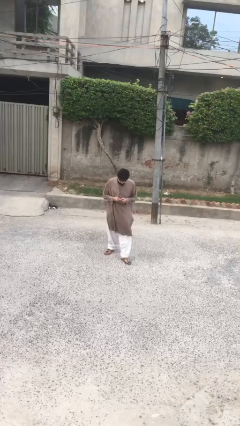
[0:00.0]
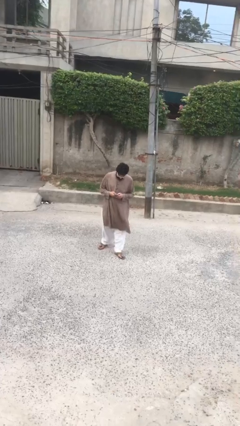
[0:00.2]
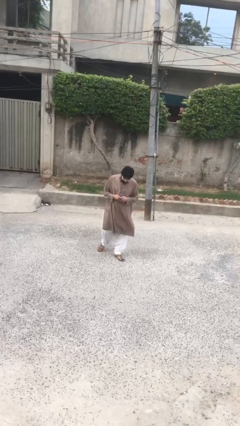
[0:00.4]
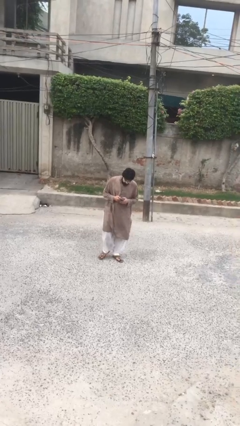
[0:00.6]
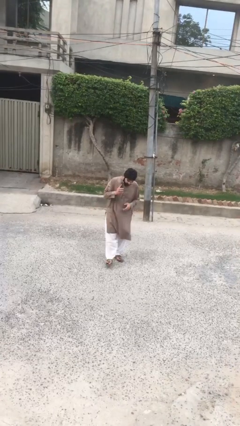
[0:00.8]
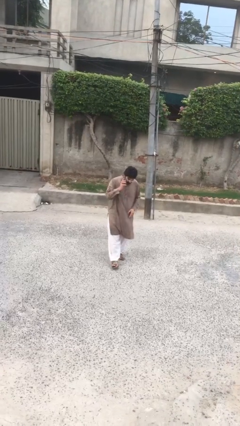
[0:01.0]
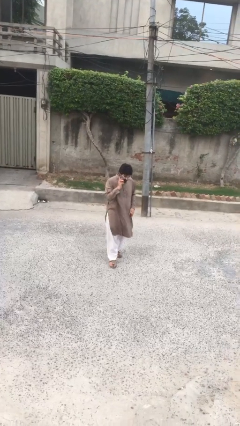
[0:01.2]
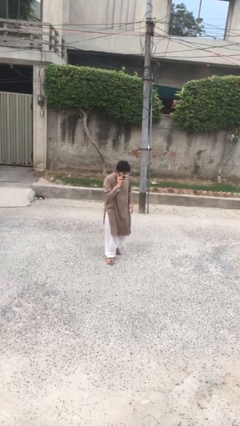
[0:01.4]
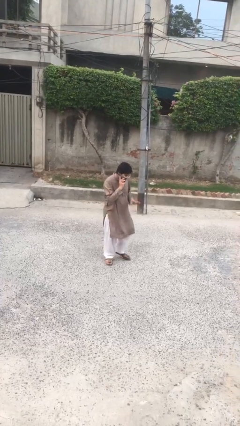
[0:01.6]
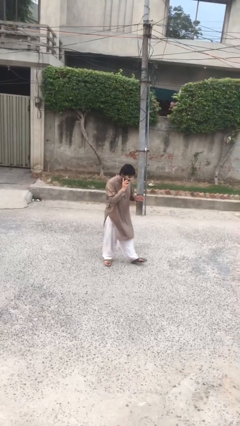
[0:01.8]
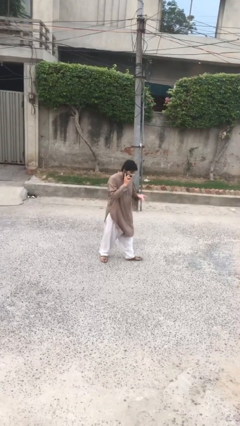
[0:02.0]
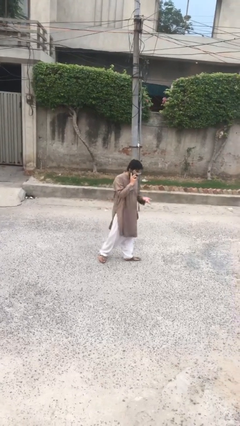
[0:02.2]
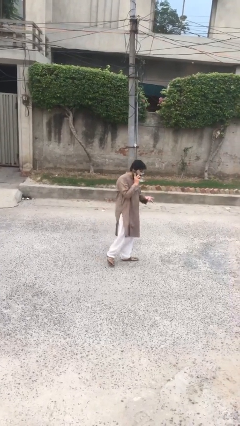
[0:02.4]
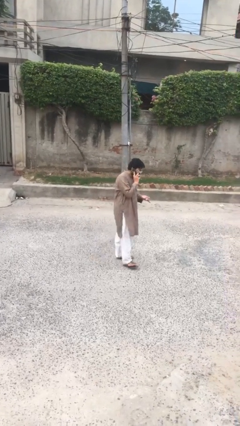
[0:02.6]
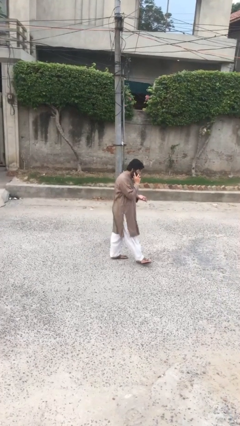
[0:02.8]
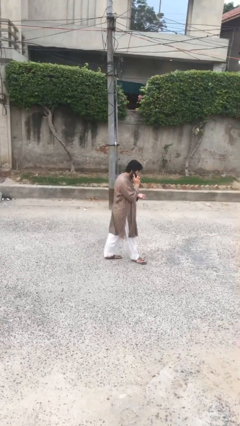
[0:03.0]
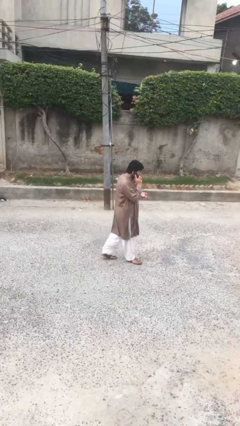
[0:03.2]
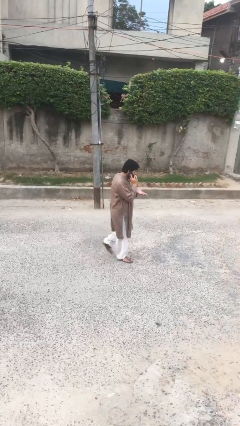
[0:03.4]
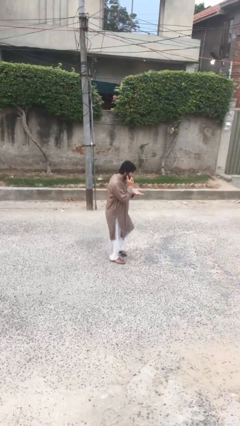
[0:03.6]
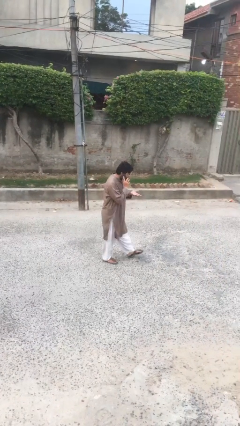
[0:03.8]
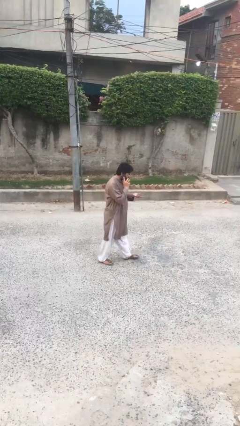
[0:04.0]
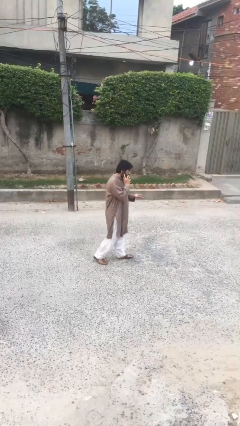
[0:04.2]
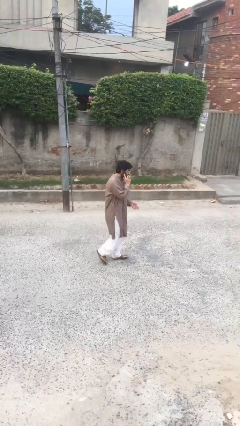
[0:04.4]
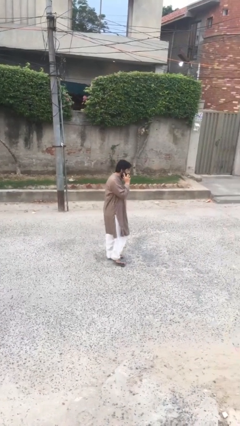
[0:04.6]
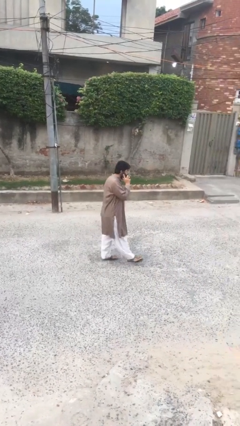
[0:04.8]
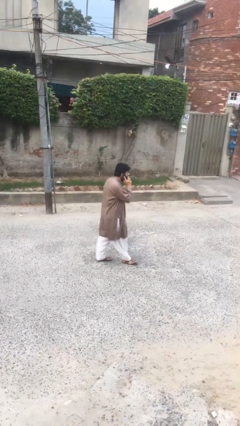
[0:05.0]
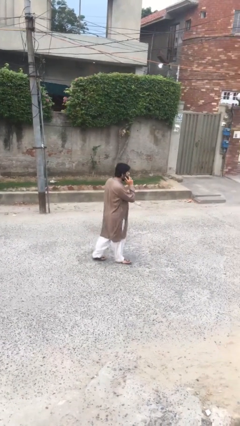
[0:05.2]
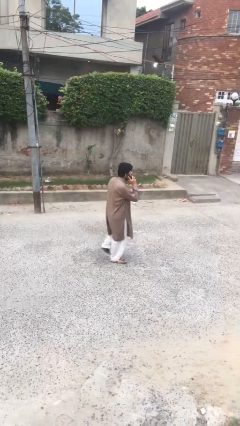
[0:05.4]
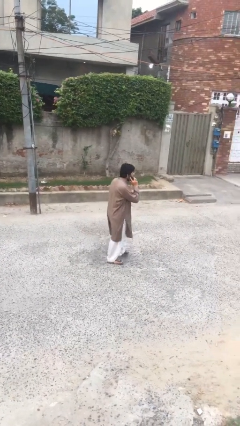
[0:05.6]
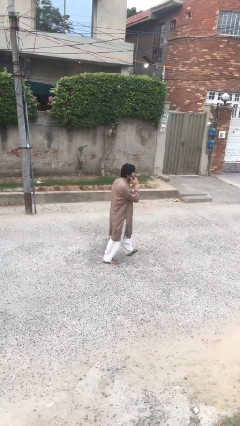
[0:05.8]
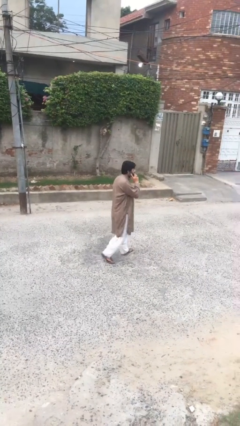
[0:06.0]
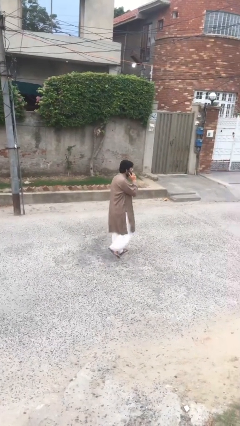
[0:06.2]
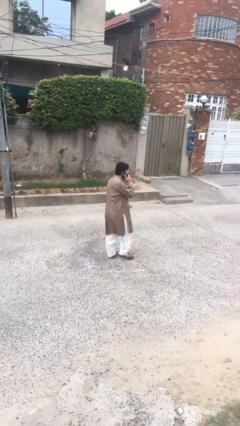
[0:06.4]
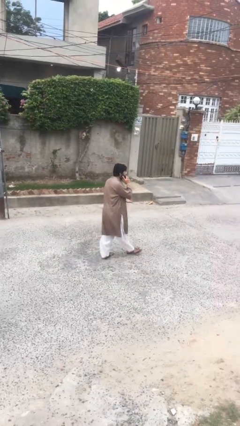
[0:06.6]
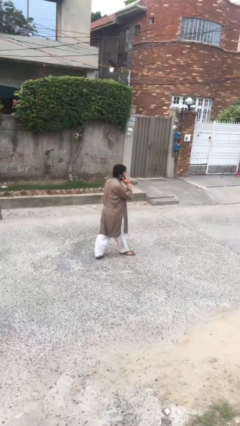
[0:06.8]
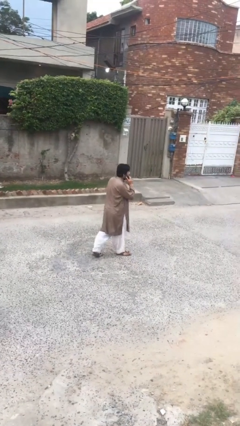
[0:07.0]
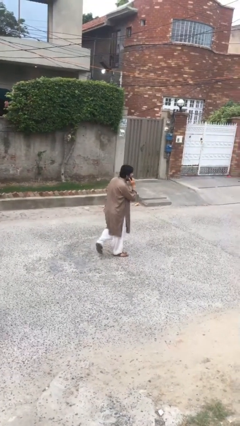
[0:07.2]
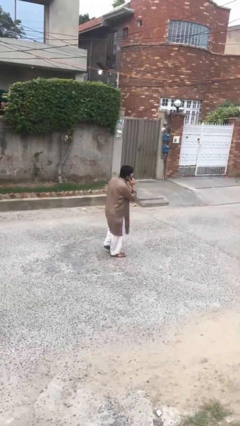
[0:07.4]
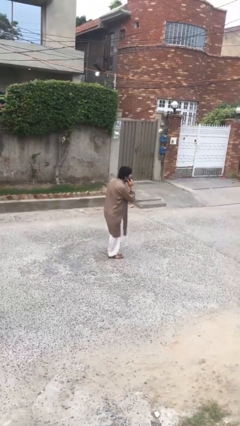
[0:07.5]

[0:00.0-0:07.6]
person talks on phone

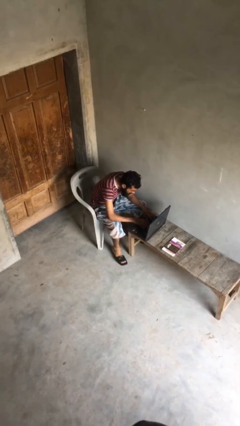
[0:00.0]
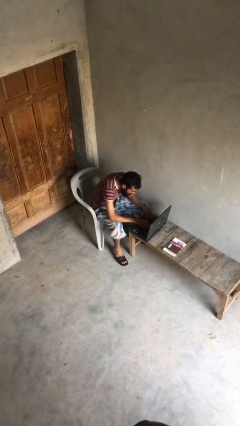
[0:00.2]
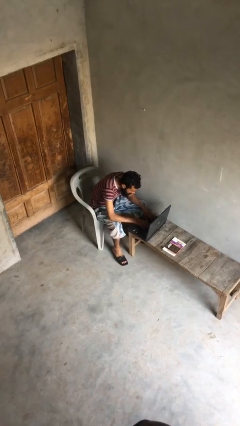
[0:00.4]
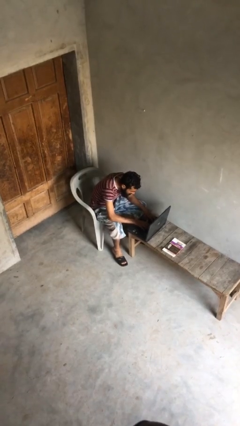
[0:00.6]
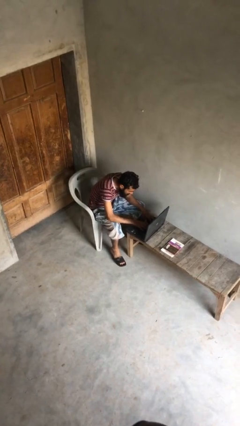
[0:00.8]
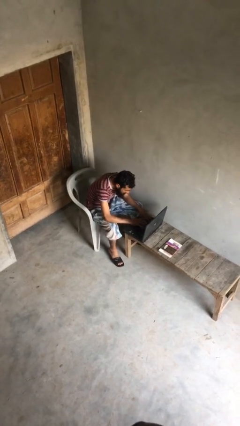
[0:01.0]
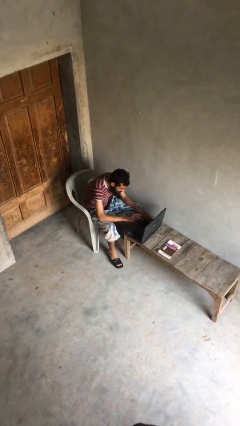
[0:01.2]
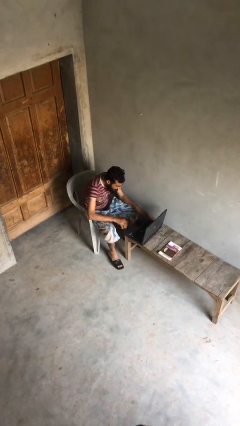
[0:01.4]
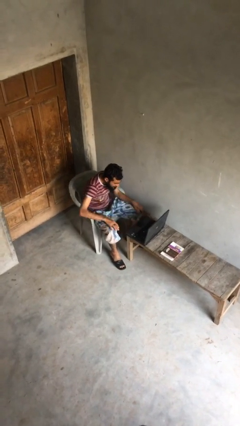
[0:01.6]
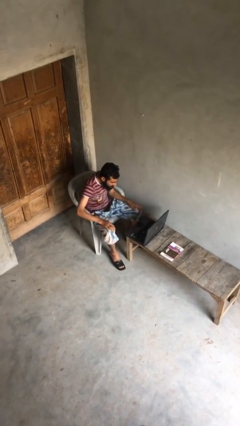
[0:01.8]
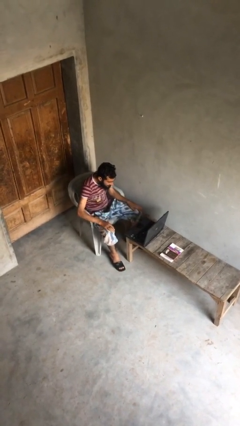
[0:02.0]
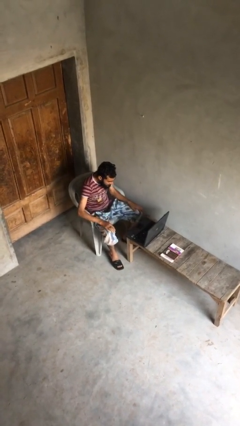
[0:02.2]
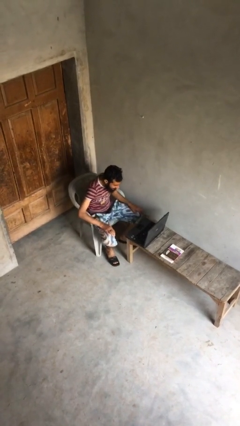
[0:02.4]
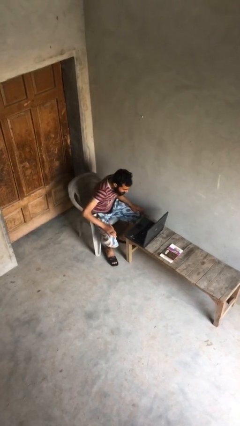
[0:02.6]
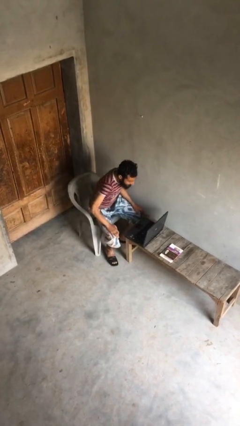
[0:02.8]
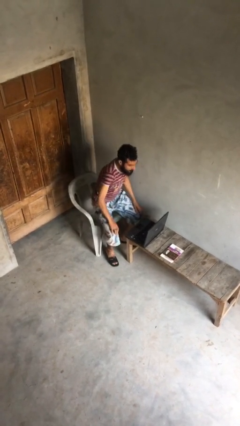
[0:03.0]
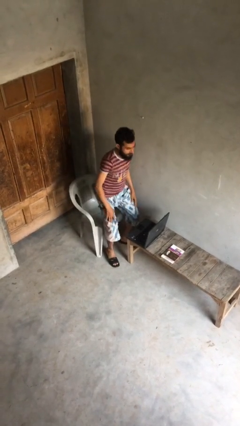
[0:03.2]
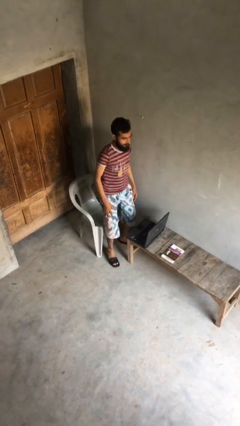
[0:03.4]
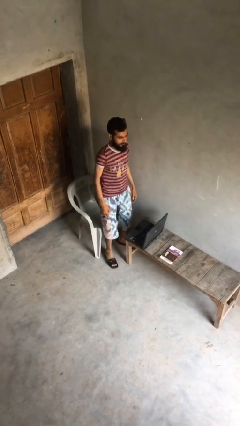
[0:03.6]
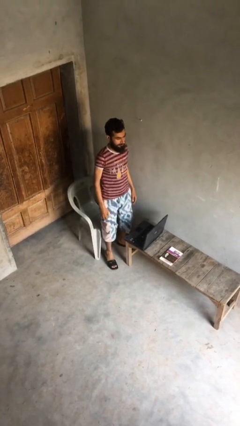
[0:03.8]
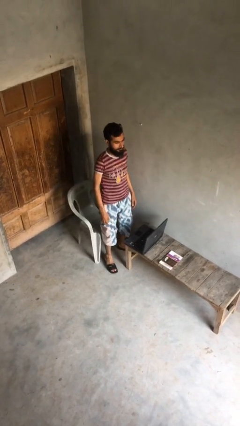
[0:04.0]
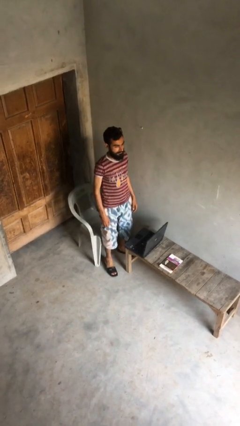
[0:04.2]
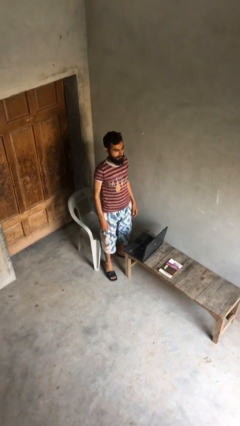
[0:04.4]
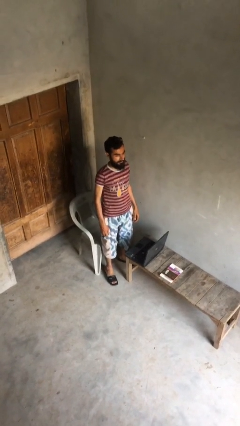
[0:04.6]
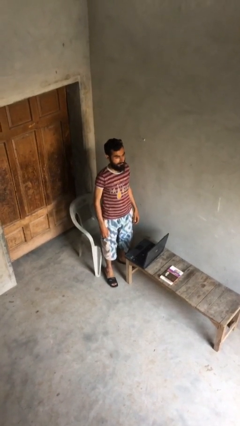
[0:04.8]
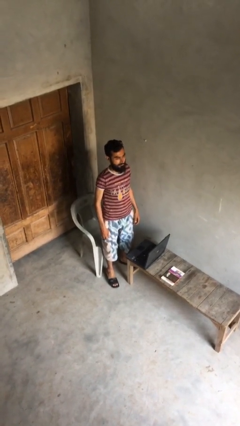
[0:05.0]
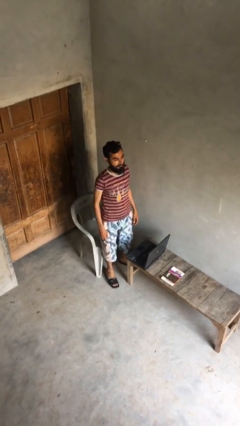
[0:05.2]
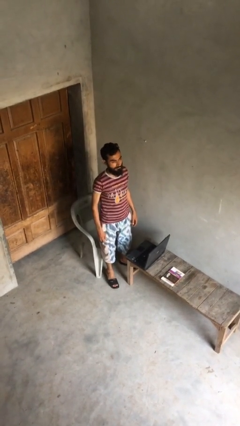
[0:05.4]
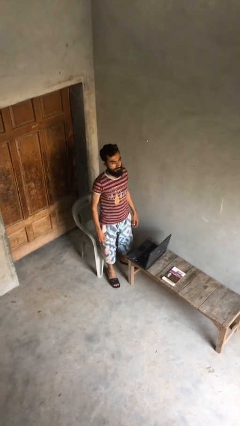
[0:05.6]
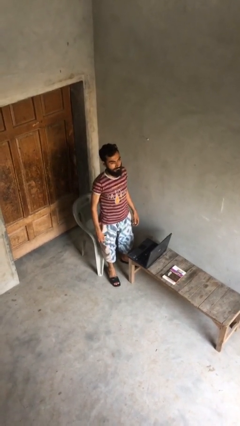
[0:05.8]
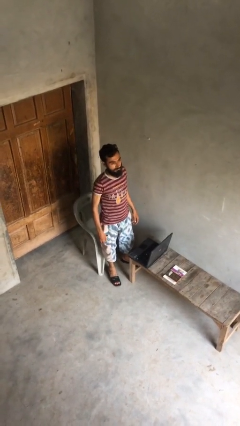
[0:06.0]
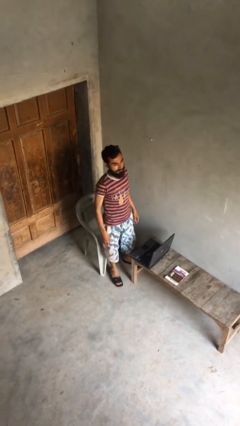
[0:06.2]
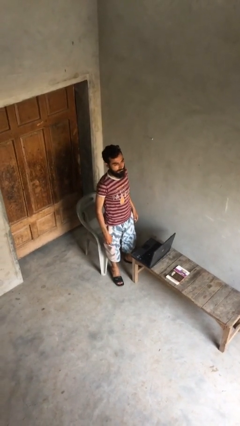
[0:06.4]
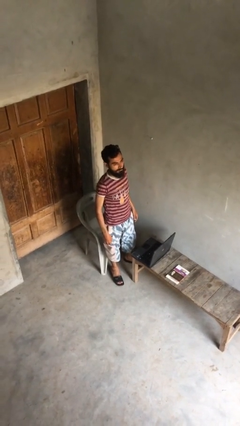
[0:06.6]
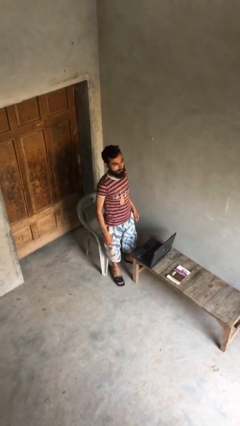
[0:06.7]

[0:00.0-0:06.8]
person stands up

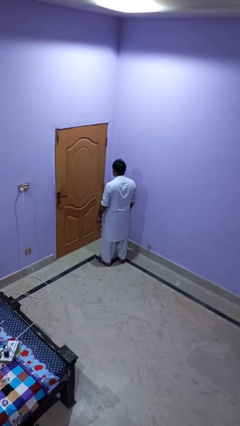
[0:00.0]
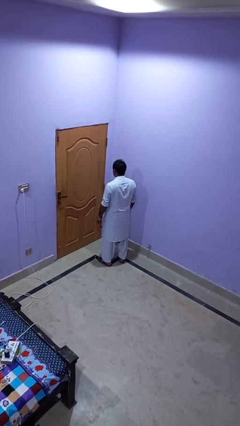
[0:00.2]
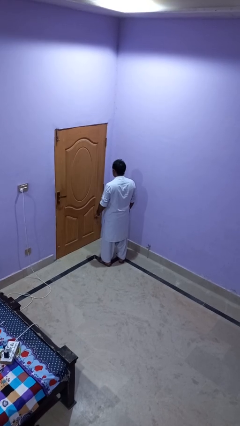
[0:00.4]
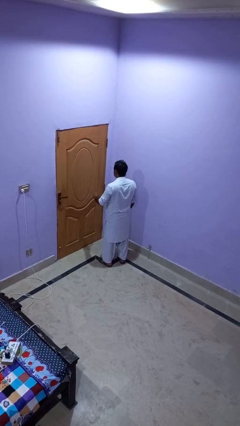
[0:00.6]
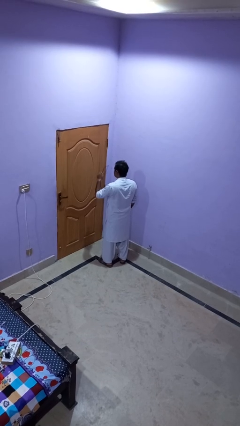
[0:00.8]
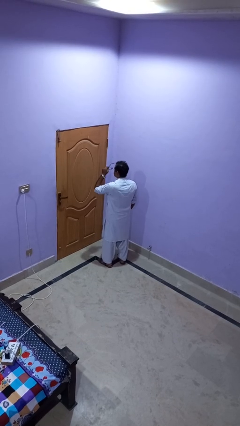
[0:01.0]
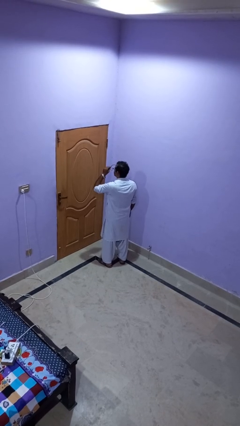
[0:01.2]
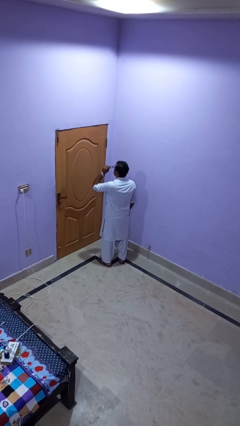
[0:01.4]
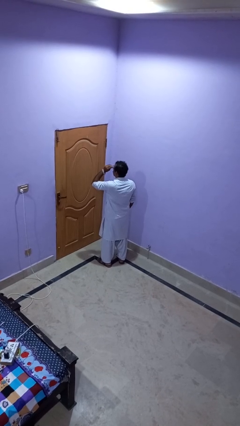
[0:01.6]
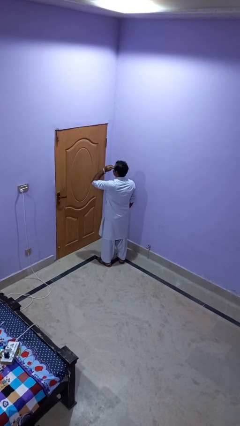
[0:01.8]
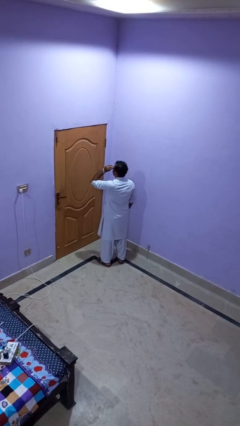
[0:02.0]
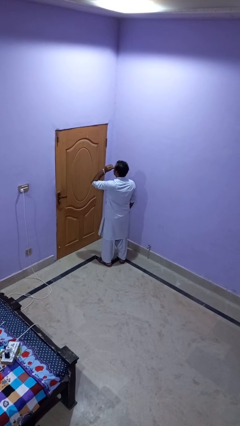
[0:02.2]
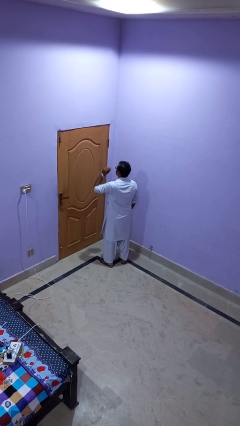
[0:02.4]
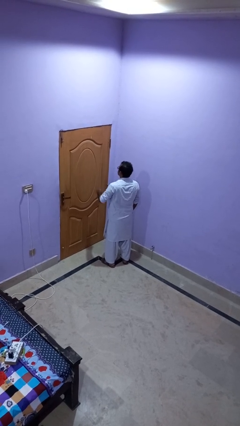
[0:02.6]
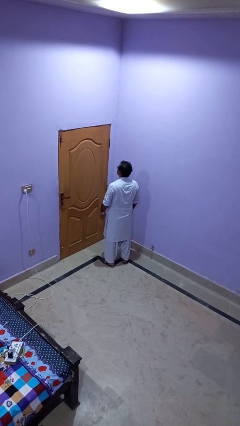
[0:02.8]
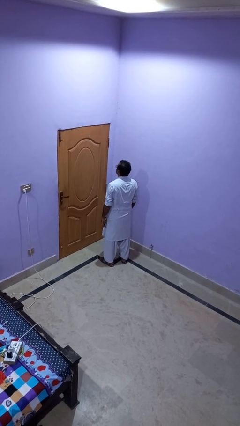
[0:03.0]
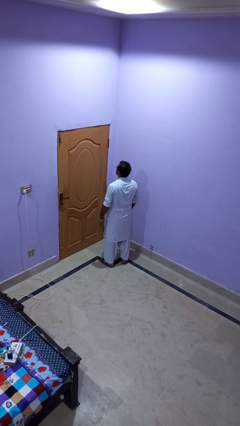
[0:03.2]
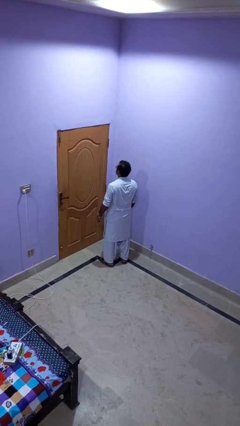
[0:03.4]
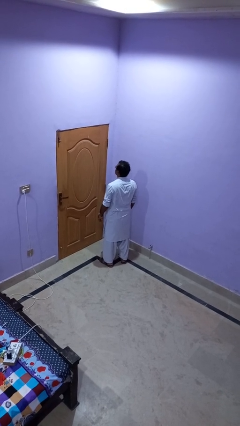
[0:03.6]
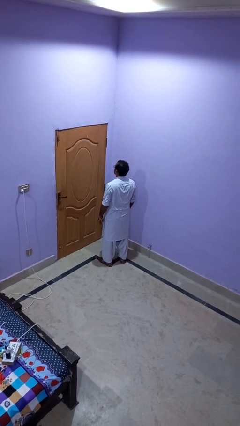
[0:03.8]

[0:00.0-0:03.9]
person puts on glasses
